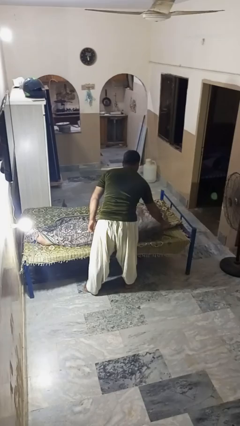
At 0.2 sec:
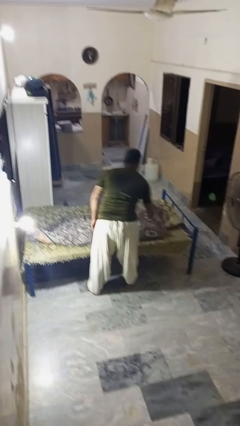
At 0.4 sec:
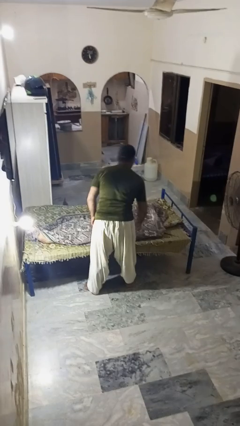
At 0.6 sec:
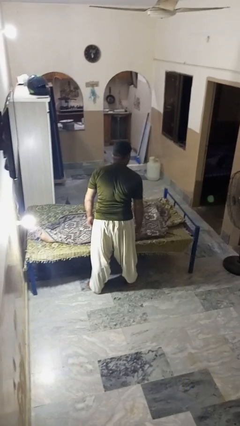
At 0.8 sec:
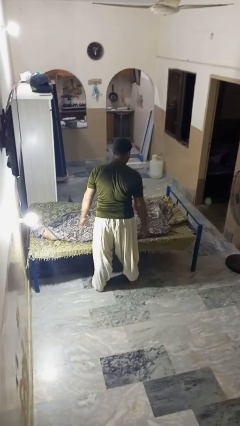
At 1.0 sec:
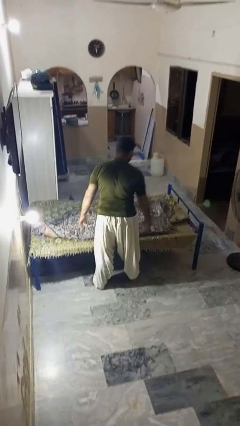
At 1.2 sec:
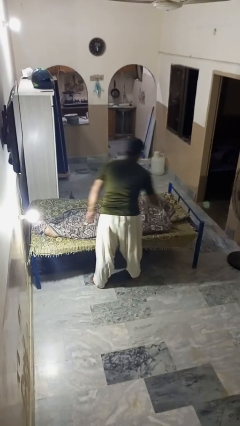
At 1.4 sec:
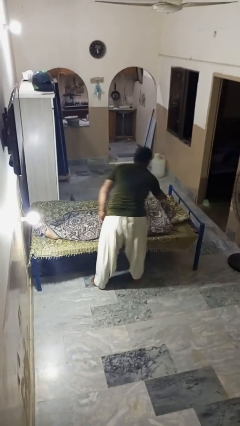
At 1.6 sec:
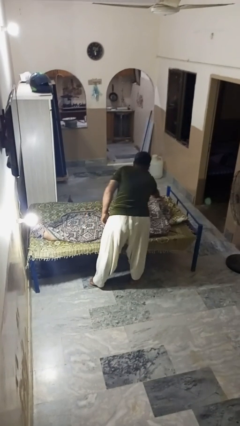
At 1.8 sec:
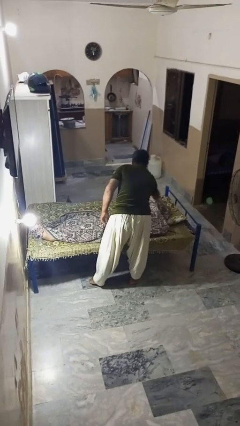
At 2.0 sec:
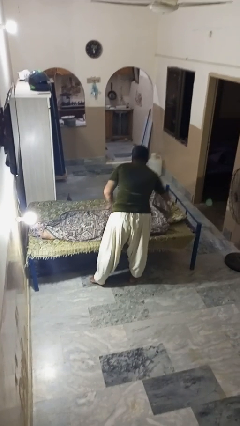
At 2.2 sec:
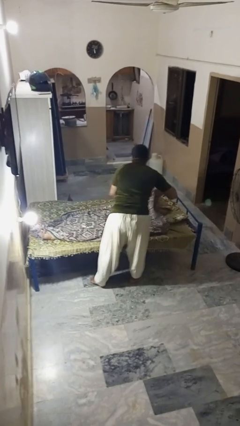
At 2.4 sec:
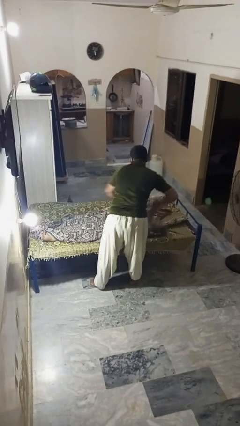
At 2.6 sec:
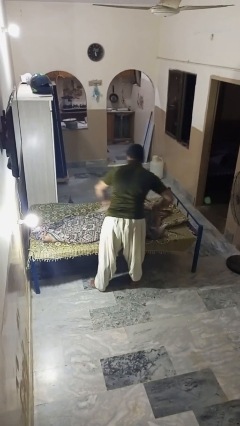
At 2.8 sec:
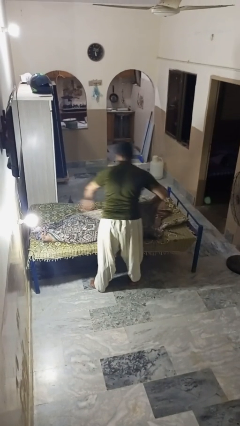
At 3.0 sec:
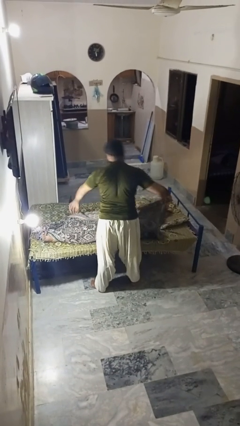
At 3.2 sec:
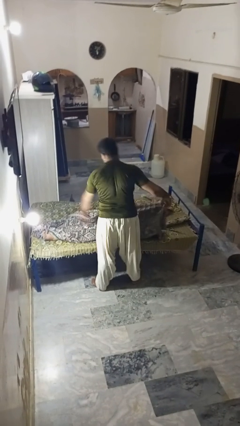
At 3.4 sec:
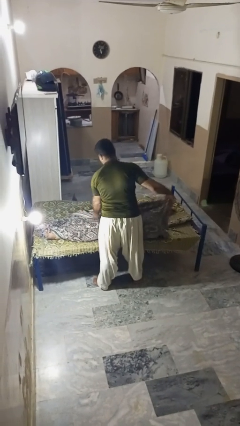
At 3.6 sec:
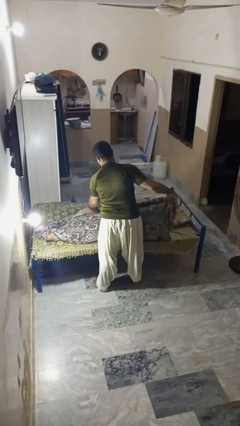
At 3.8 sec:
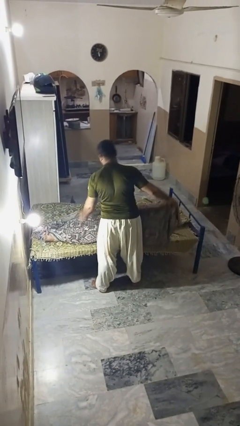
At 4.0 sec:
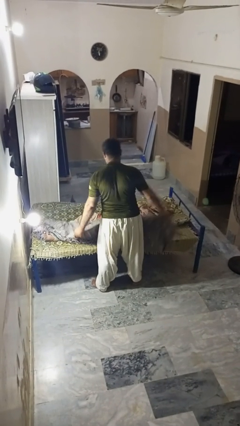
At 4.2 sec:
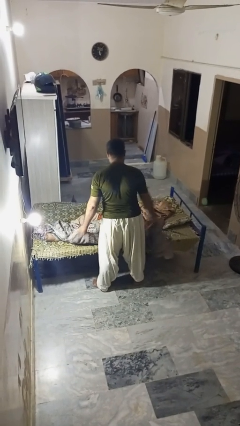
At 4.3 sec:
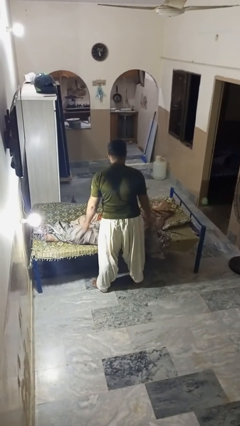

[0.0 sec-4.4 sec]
person uncovers friend with blanket

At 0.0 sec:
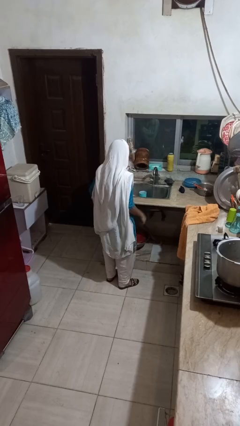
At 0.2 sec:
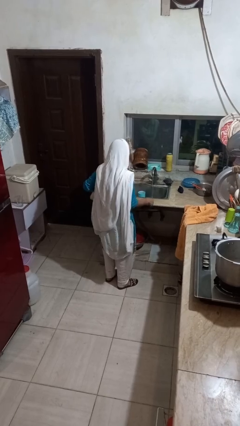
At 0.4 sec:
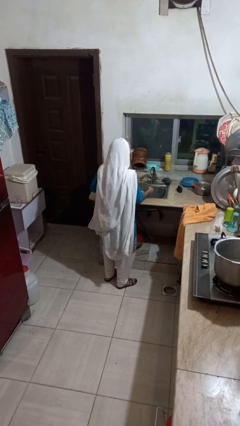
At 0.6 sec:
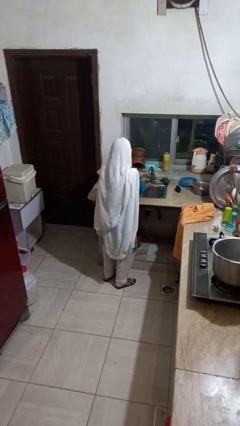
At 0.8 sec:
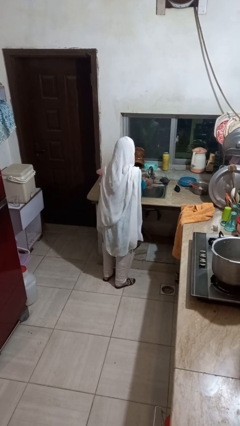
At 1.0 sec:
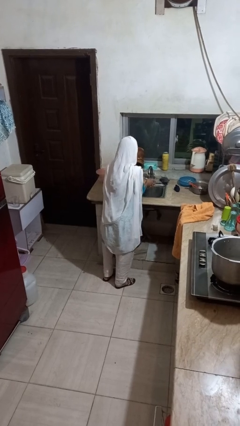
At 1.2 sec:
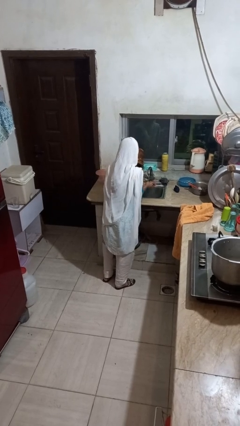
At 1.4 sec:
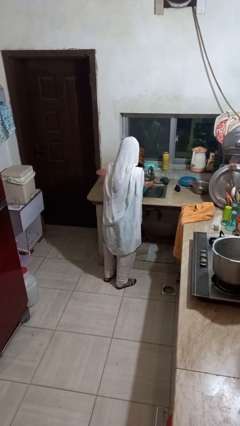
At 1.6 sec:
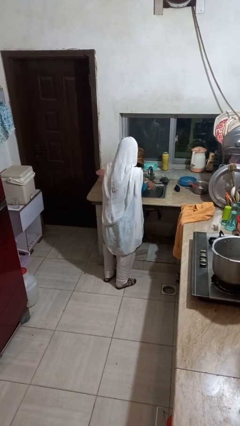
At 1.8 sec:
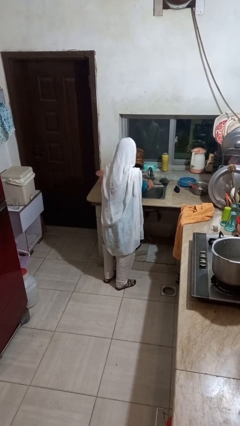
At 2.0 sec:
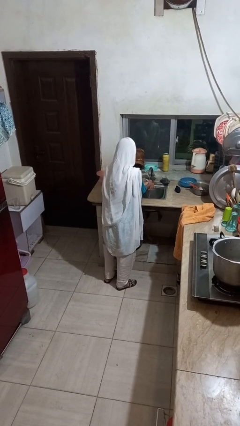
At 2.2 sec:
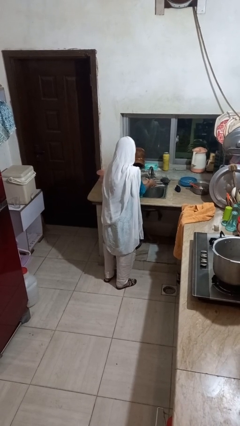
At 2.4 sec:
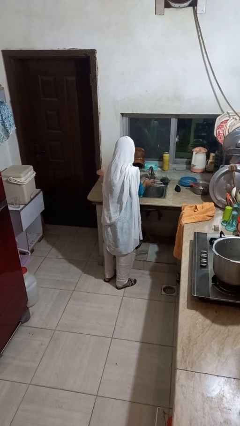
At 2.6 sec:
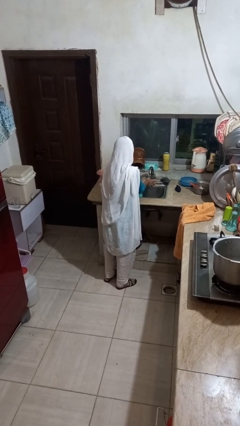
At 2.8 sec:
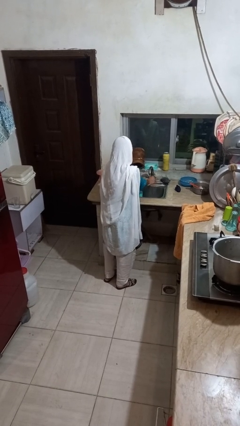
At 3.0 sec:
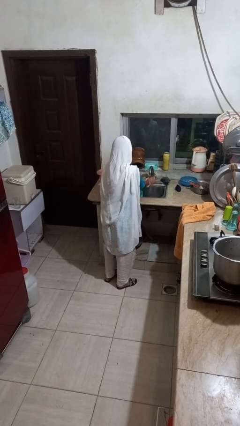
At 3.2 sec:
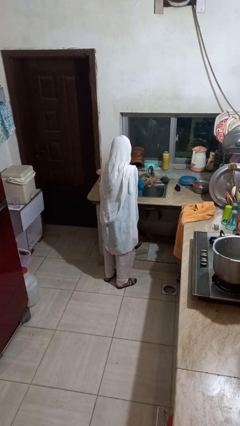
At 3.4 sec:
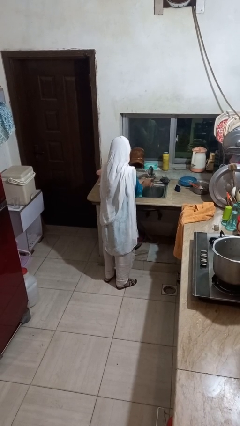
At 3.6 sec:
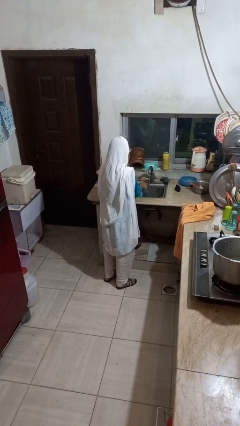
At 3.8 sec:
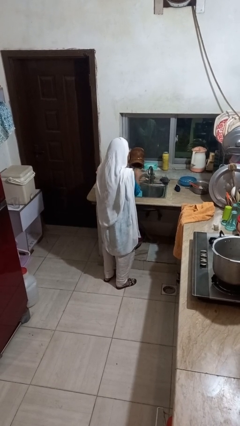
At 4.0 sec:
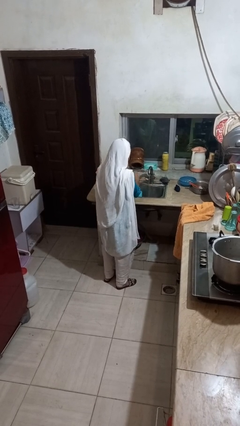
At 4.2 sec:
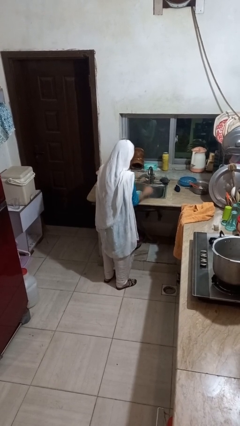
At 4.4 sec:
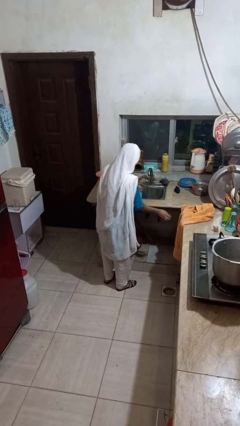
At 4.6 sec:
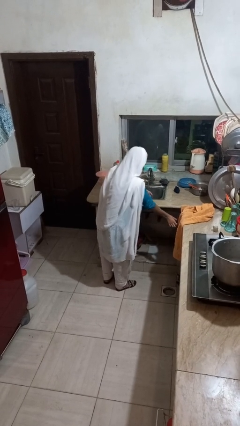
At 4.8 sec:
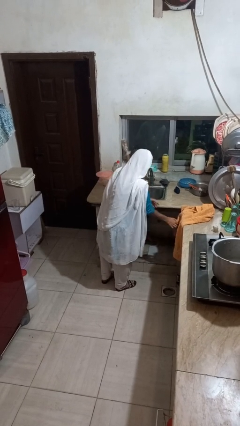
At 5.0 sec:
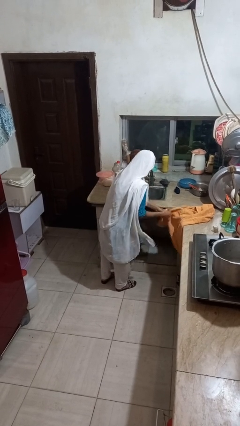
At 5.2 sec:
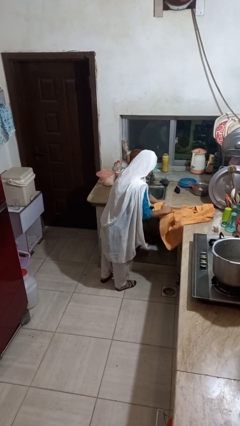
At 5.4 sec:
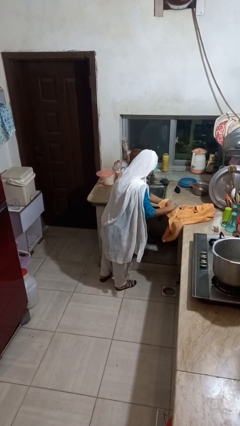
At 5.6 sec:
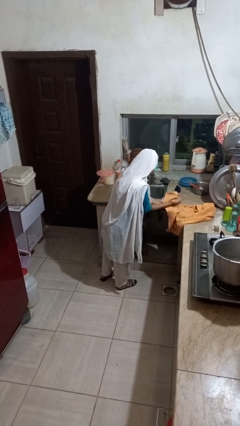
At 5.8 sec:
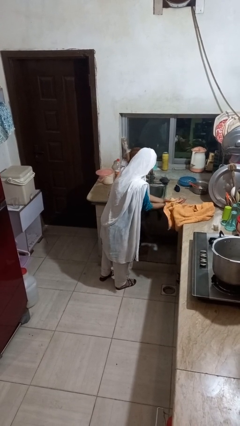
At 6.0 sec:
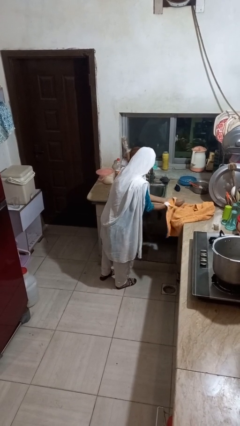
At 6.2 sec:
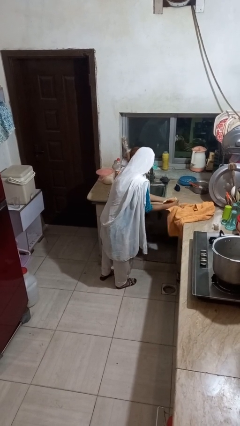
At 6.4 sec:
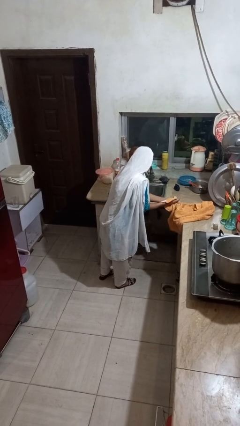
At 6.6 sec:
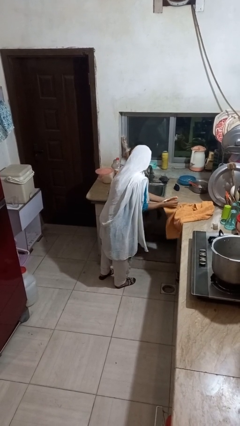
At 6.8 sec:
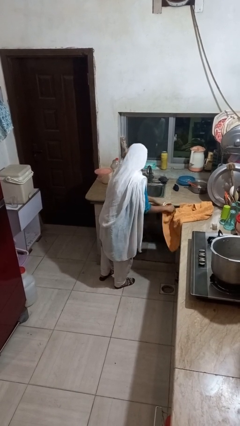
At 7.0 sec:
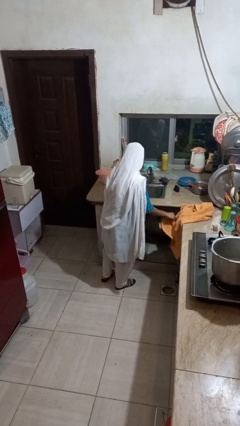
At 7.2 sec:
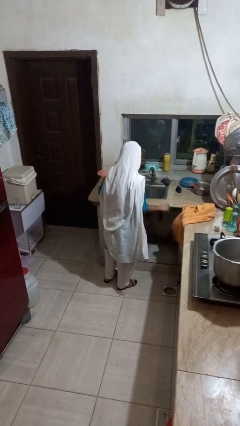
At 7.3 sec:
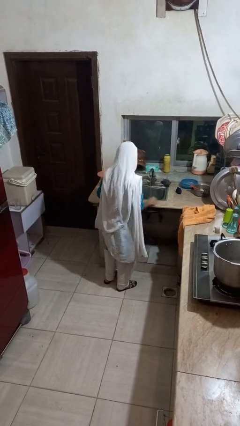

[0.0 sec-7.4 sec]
person washes hands

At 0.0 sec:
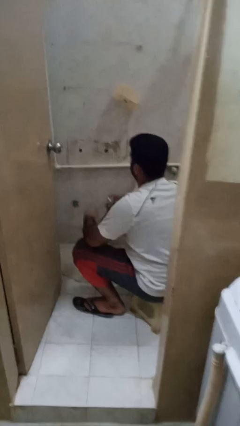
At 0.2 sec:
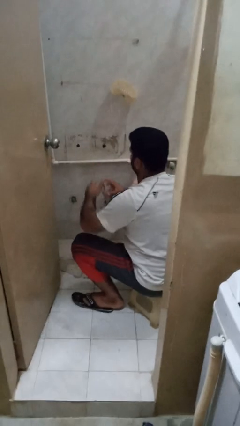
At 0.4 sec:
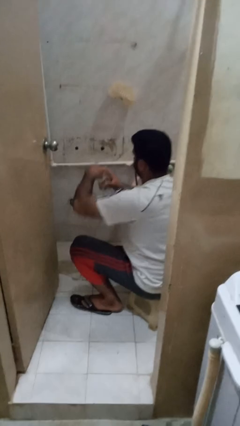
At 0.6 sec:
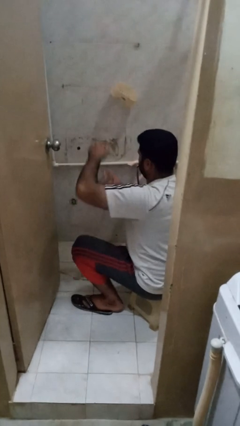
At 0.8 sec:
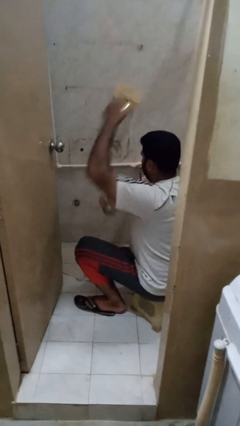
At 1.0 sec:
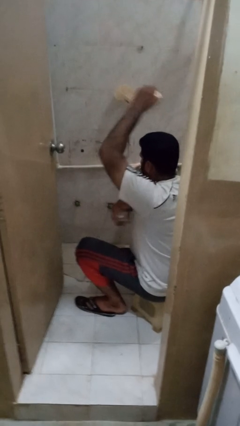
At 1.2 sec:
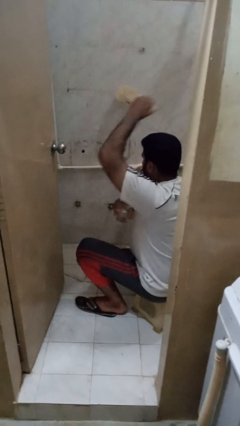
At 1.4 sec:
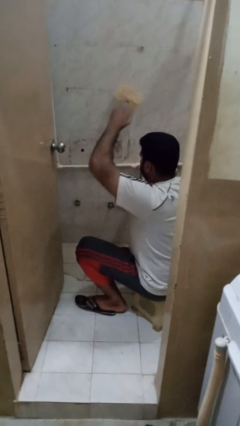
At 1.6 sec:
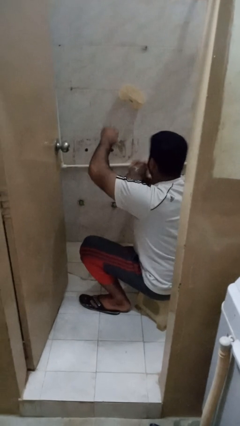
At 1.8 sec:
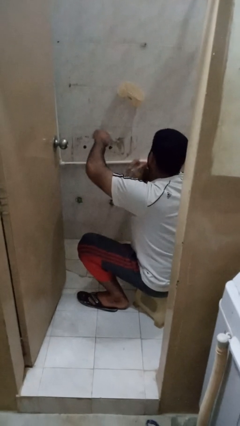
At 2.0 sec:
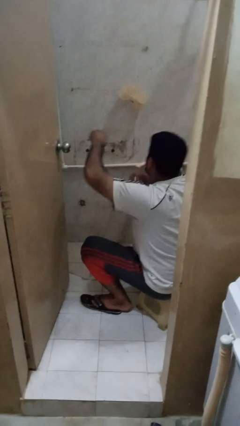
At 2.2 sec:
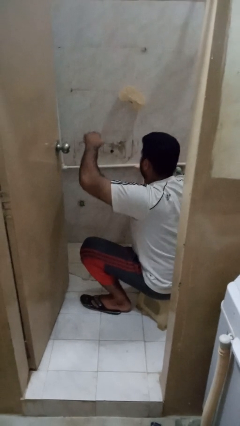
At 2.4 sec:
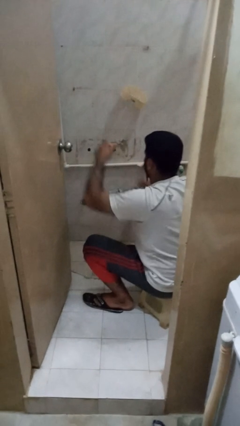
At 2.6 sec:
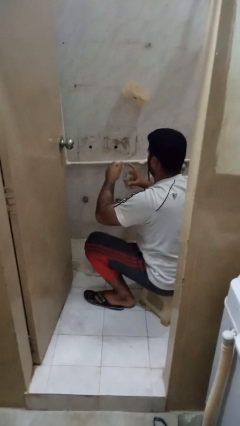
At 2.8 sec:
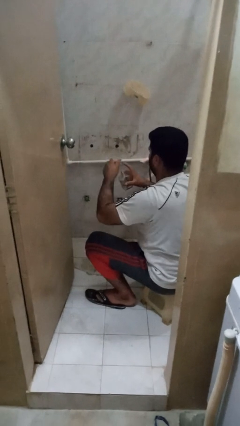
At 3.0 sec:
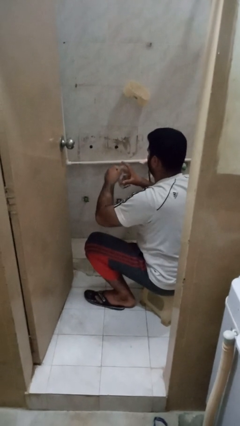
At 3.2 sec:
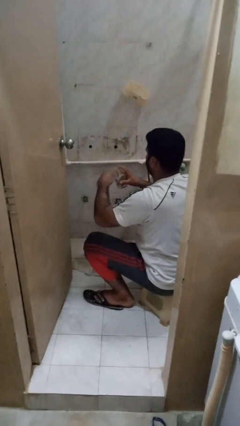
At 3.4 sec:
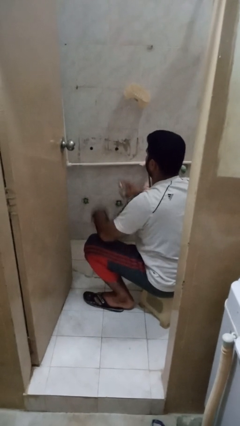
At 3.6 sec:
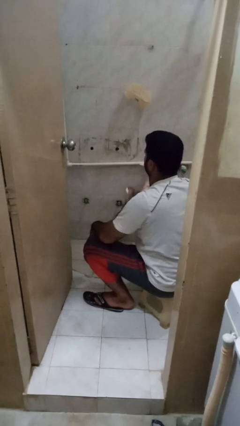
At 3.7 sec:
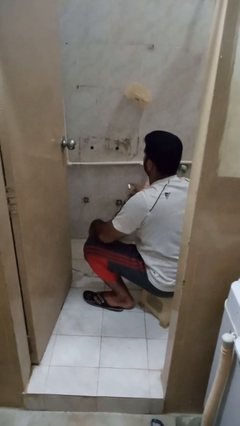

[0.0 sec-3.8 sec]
person applies deodorant

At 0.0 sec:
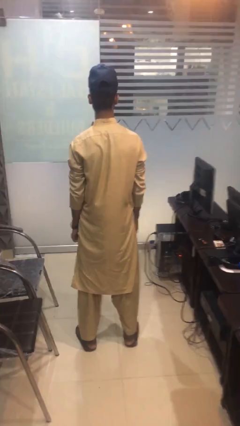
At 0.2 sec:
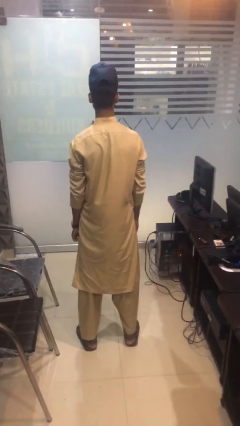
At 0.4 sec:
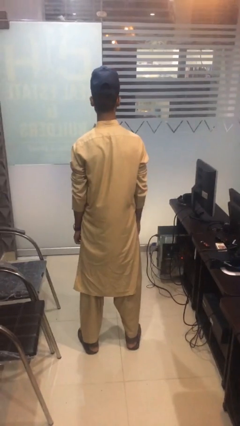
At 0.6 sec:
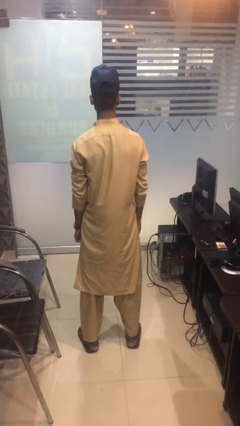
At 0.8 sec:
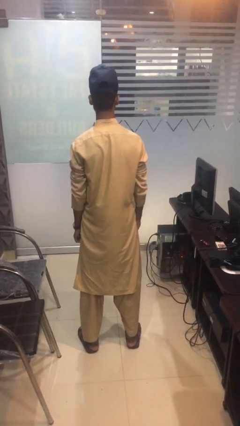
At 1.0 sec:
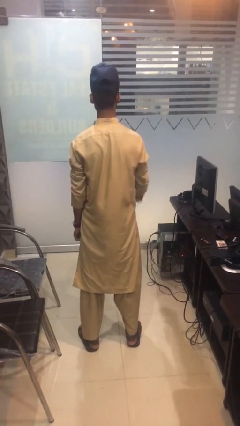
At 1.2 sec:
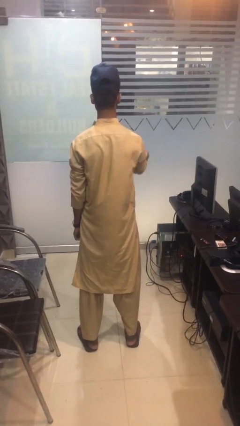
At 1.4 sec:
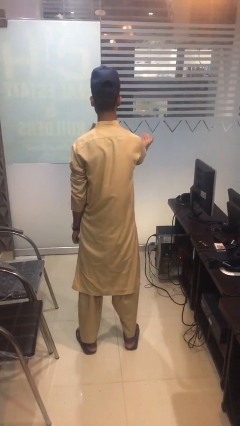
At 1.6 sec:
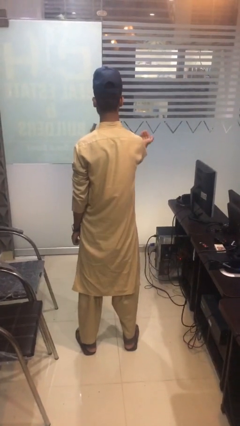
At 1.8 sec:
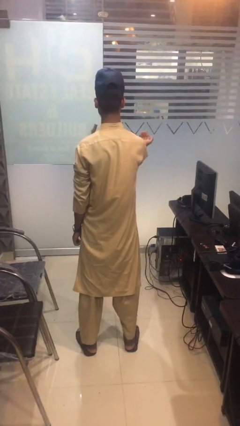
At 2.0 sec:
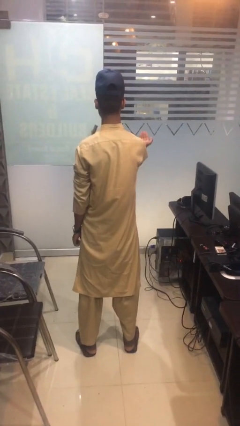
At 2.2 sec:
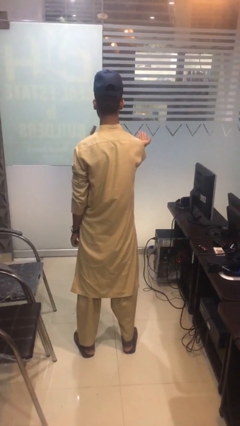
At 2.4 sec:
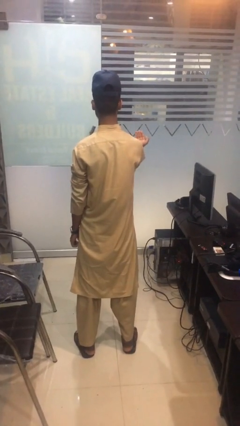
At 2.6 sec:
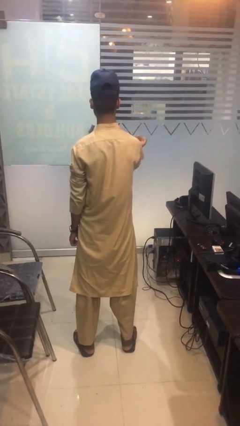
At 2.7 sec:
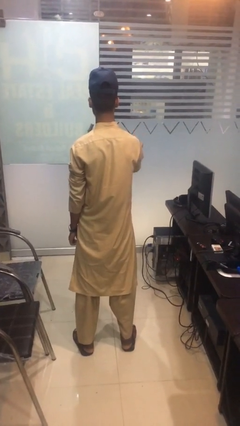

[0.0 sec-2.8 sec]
person gestures come here
